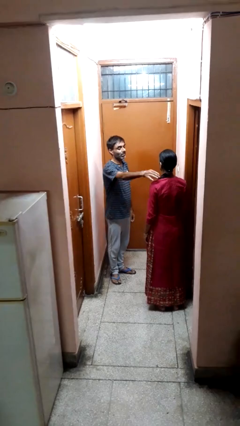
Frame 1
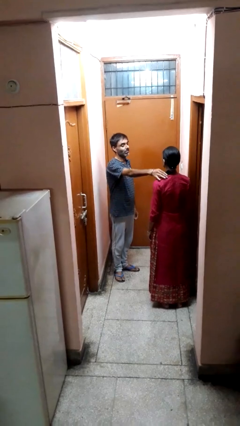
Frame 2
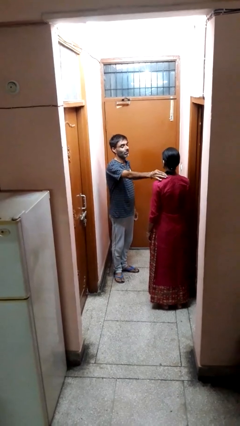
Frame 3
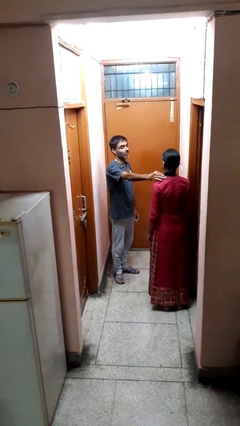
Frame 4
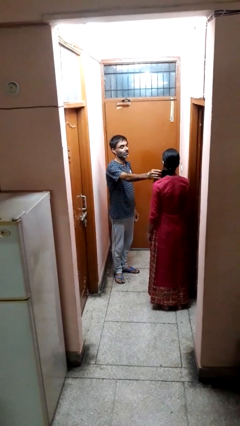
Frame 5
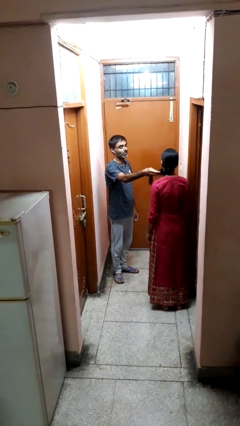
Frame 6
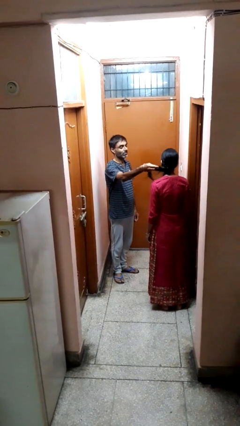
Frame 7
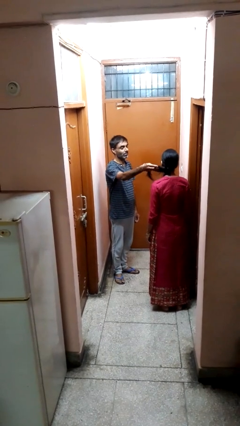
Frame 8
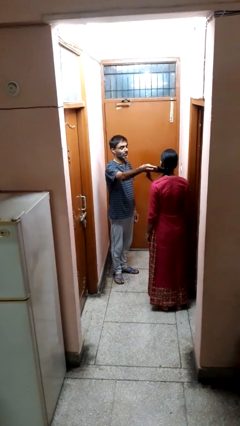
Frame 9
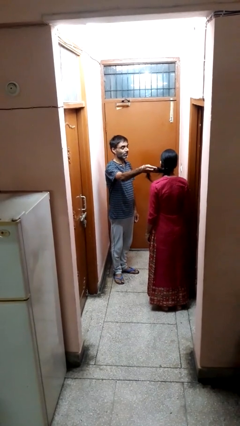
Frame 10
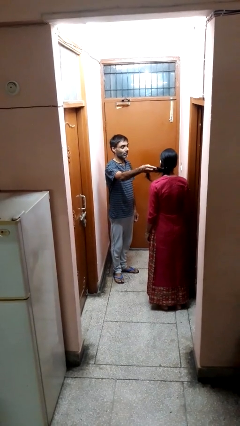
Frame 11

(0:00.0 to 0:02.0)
person grabs person by hair

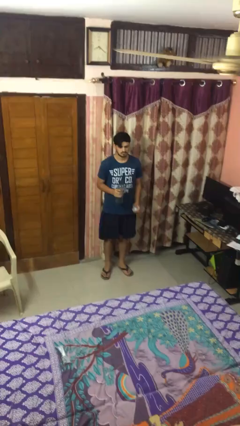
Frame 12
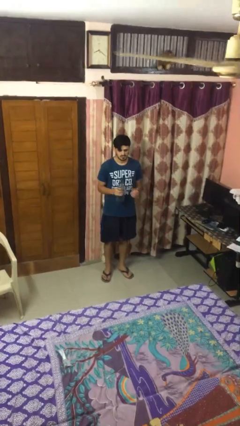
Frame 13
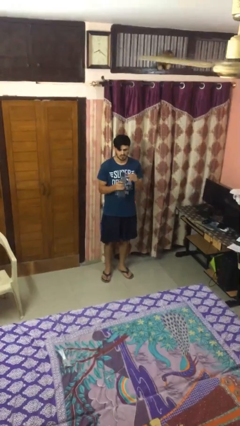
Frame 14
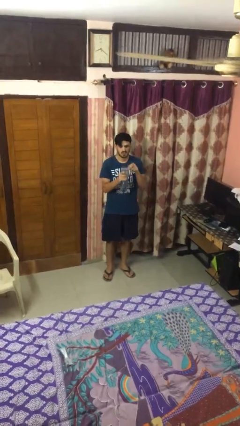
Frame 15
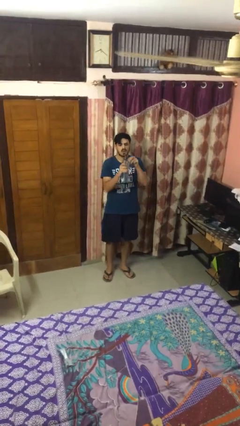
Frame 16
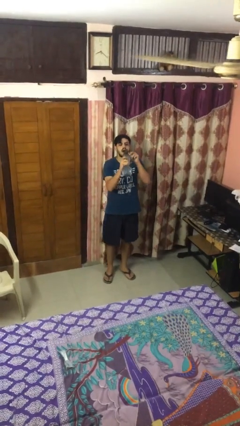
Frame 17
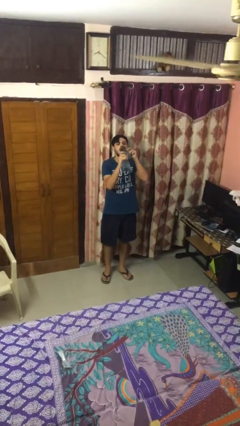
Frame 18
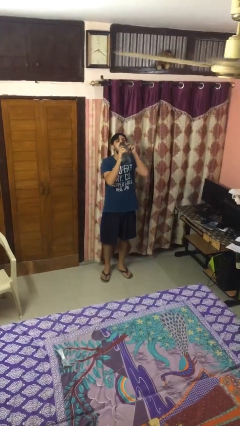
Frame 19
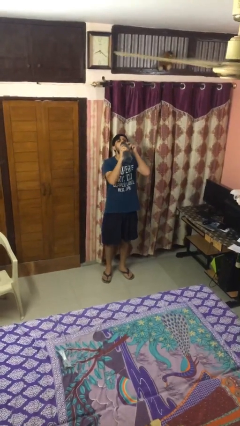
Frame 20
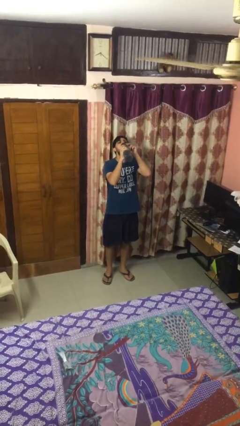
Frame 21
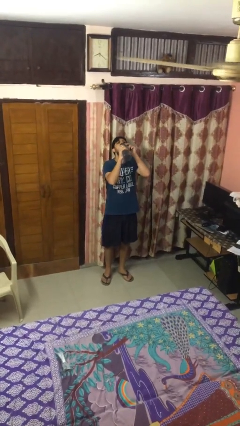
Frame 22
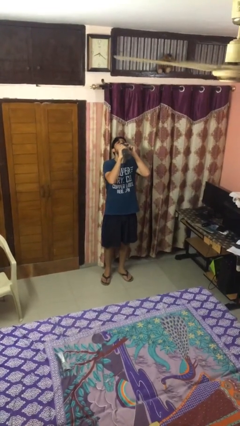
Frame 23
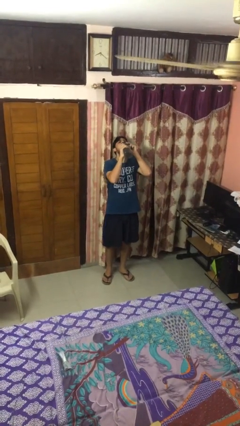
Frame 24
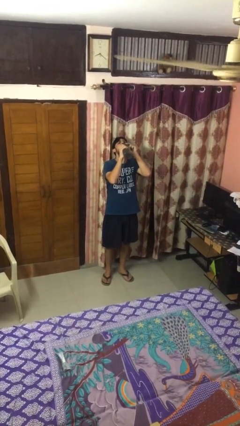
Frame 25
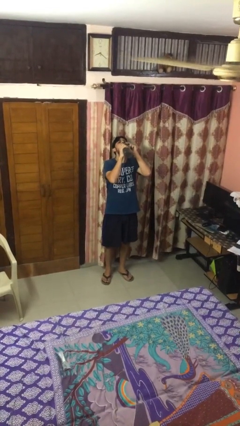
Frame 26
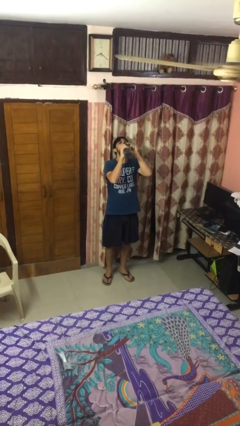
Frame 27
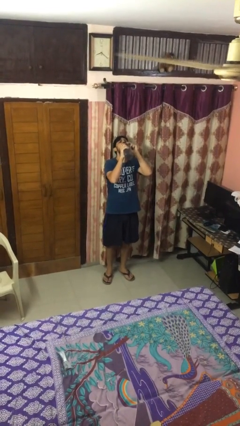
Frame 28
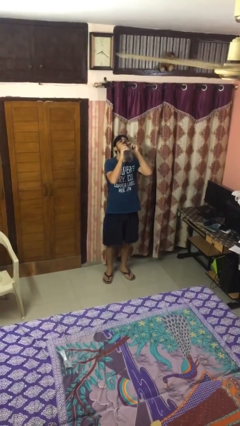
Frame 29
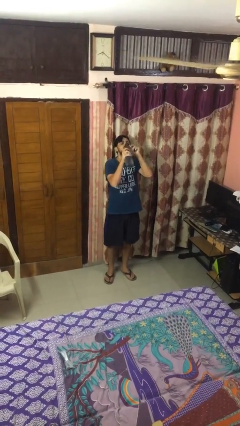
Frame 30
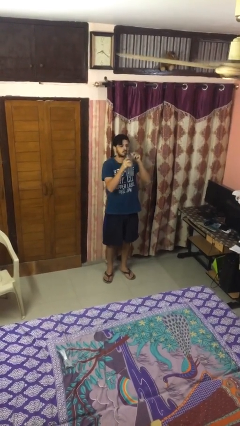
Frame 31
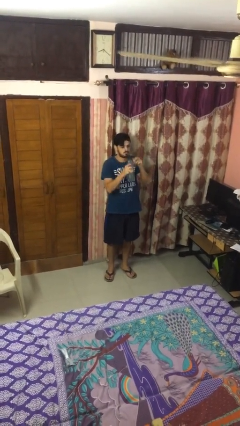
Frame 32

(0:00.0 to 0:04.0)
person drinks from bottle

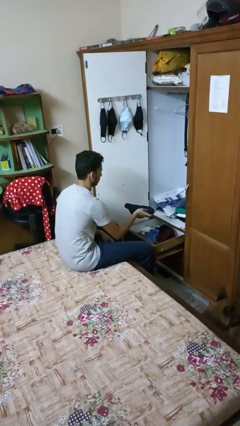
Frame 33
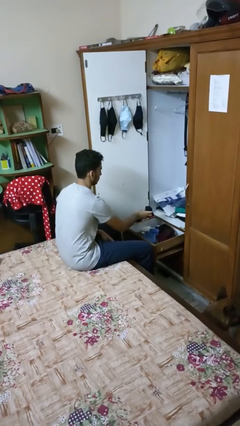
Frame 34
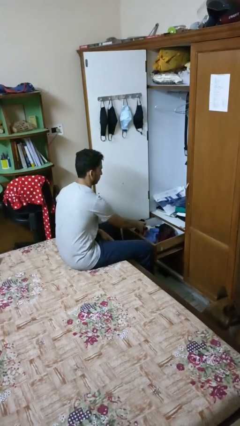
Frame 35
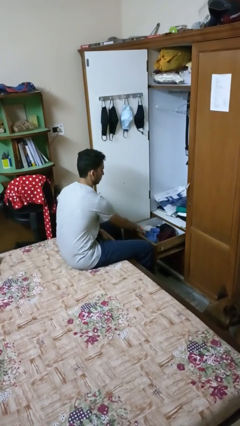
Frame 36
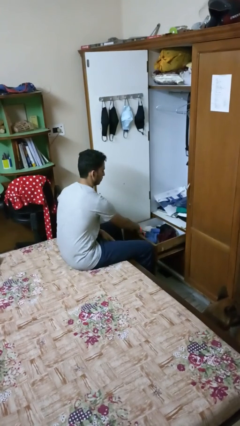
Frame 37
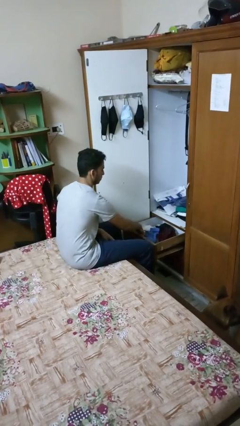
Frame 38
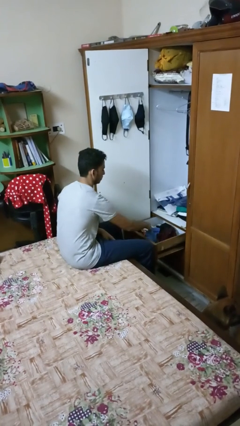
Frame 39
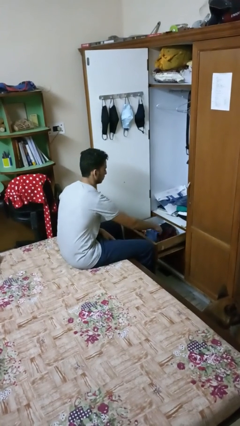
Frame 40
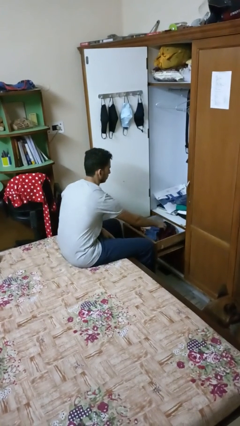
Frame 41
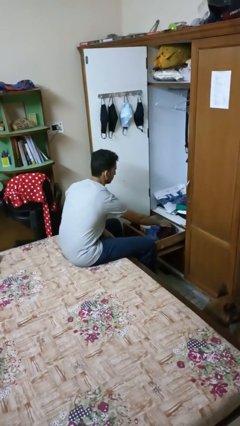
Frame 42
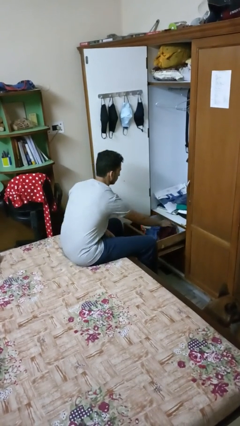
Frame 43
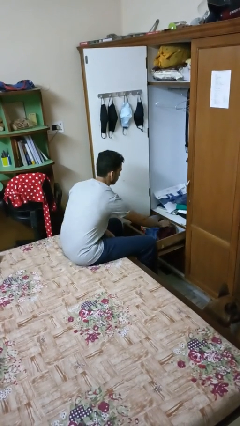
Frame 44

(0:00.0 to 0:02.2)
person puts clothes into dresser

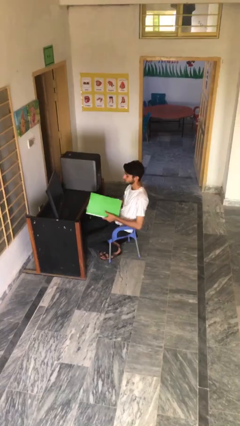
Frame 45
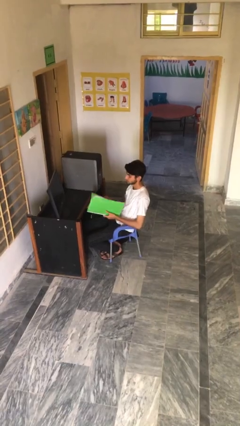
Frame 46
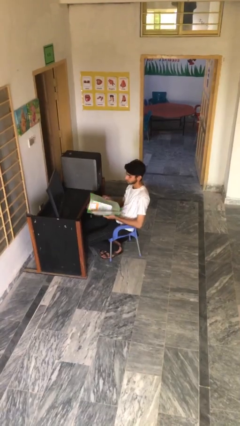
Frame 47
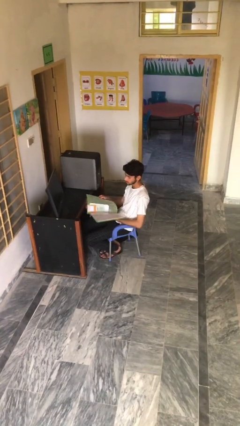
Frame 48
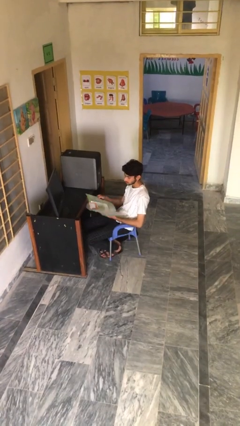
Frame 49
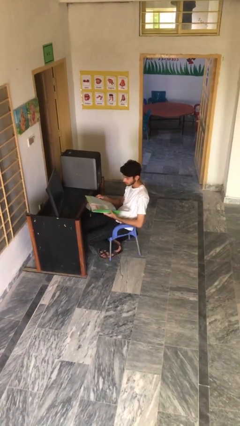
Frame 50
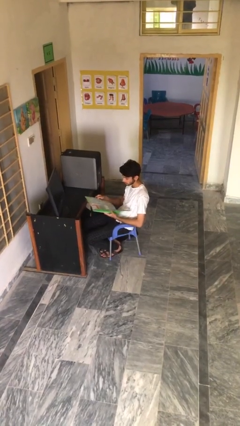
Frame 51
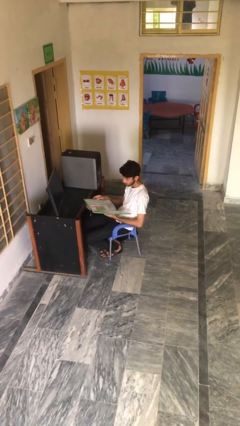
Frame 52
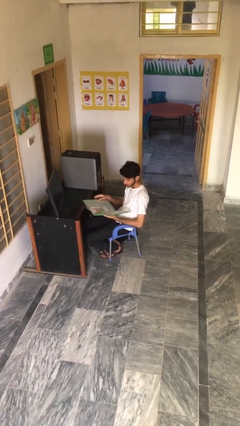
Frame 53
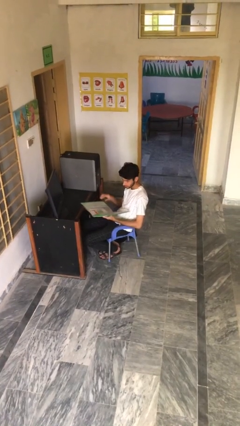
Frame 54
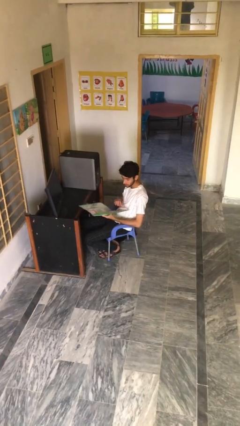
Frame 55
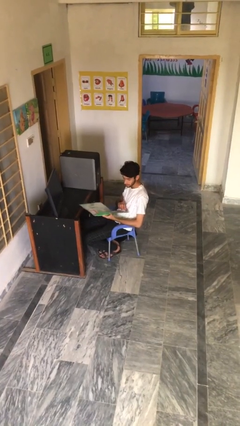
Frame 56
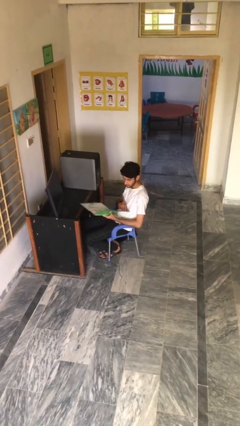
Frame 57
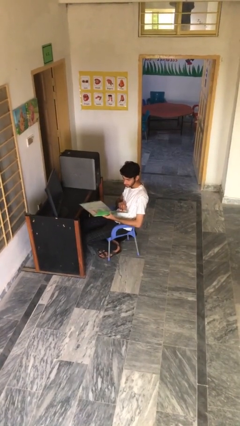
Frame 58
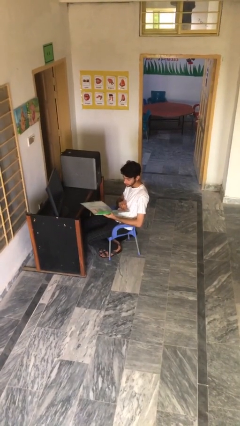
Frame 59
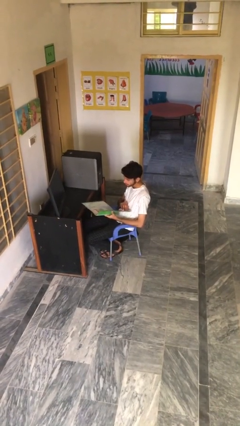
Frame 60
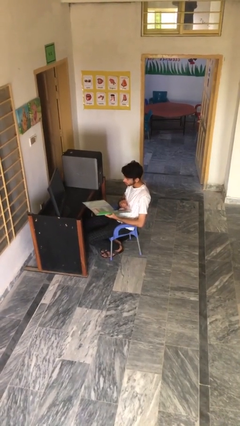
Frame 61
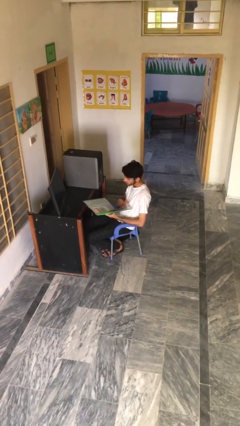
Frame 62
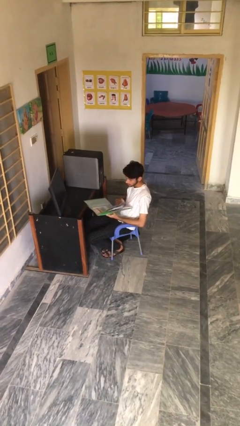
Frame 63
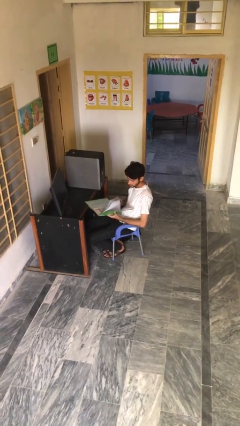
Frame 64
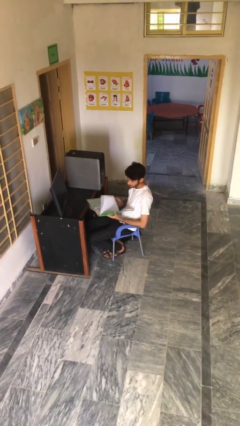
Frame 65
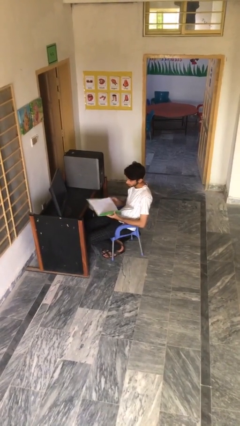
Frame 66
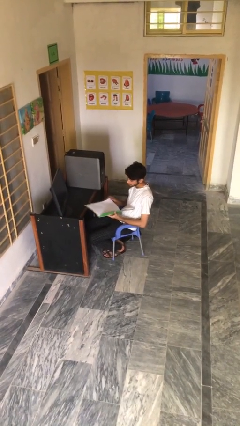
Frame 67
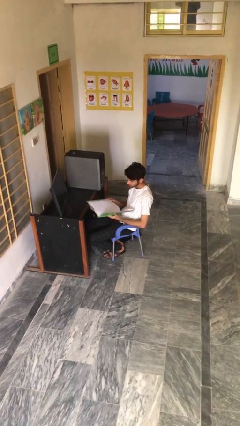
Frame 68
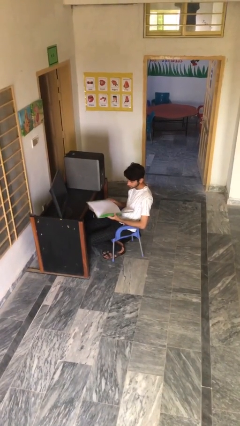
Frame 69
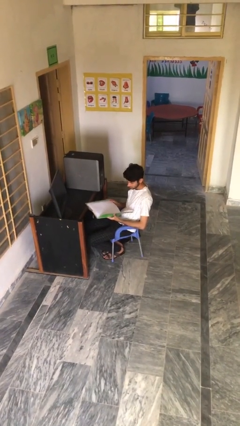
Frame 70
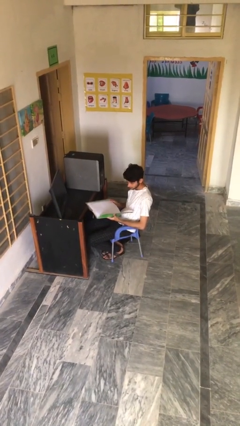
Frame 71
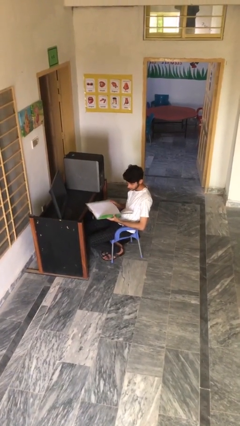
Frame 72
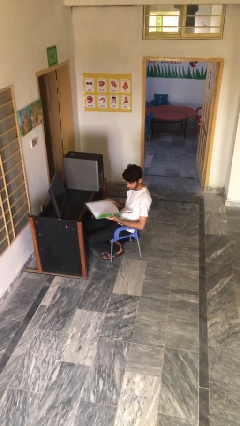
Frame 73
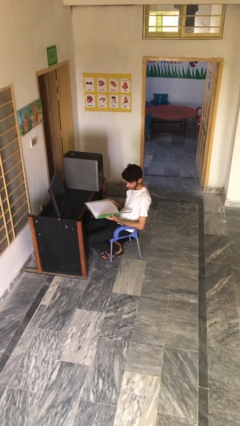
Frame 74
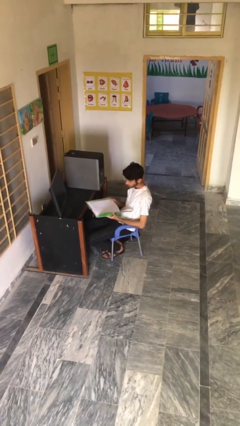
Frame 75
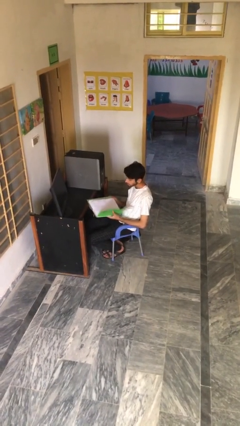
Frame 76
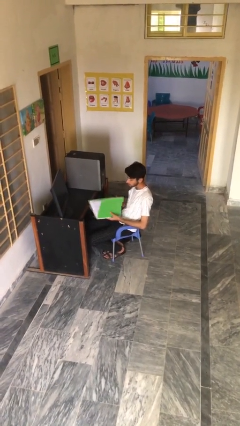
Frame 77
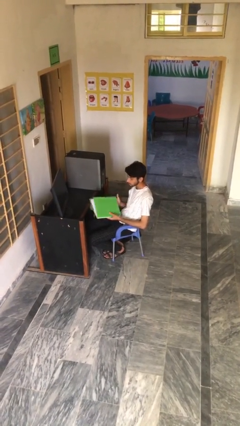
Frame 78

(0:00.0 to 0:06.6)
person reads document

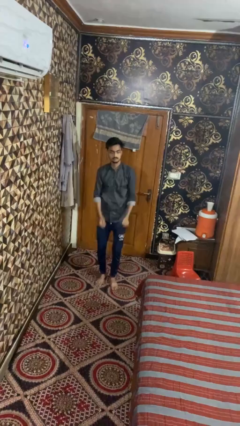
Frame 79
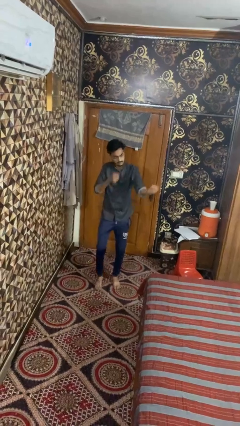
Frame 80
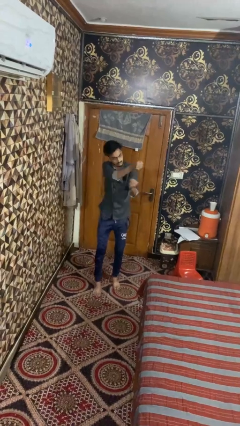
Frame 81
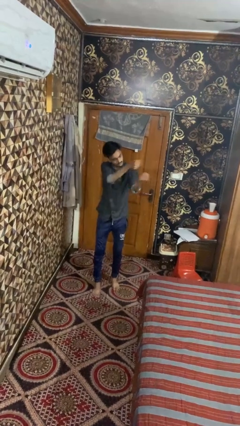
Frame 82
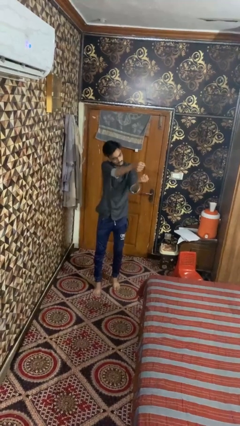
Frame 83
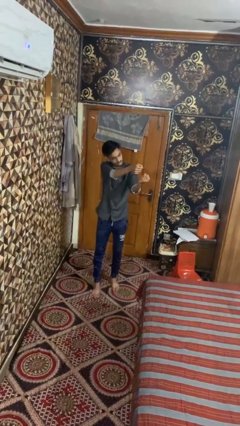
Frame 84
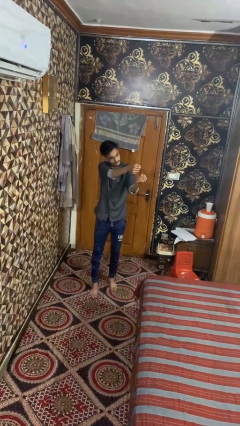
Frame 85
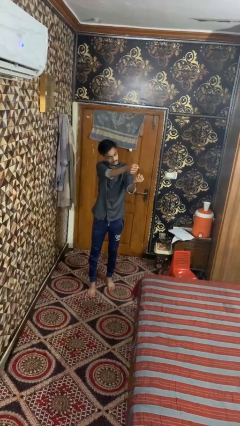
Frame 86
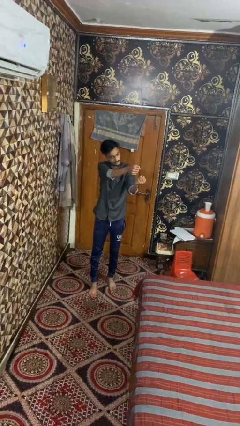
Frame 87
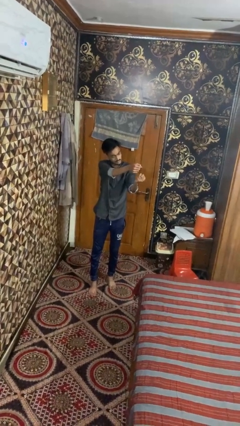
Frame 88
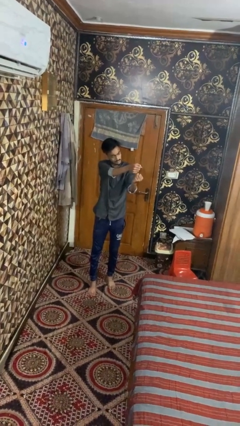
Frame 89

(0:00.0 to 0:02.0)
person punches

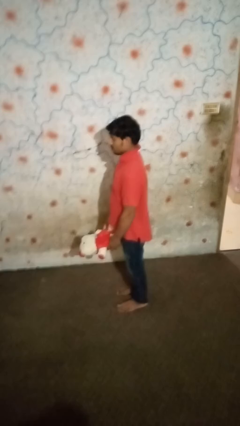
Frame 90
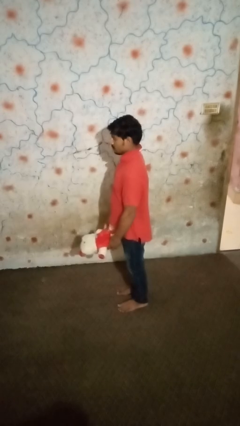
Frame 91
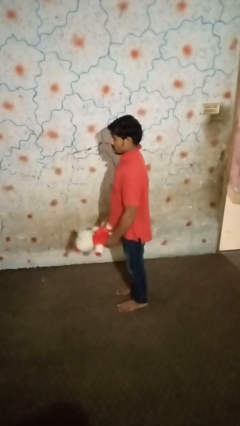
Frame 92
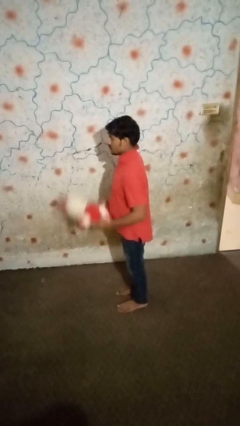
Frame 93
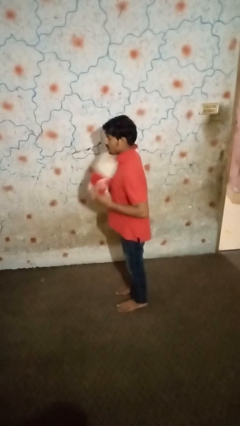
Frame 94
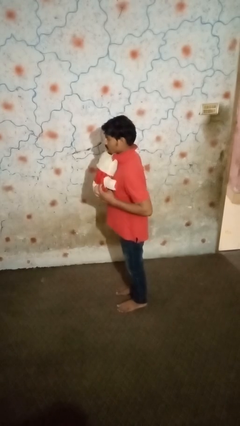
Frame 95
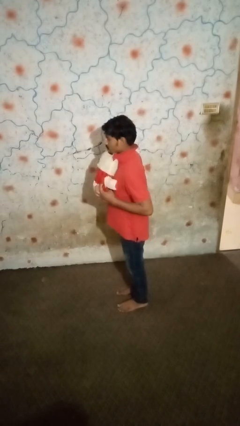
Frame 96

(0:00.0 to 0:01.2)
person hugs stuffed animal
